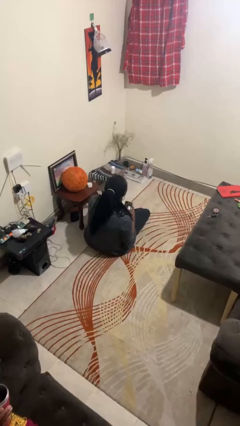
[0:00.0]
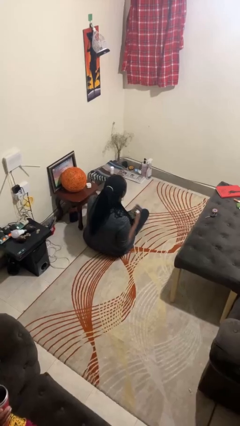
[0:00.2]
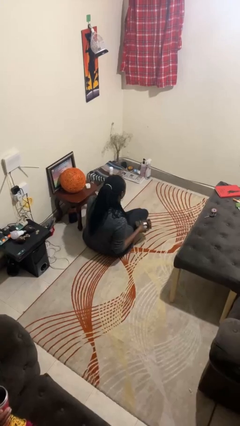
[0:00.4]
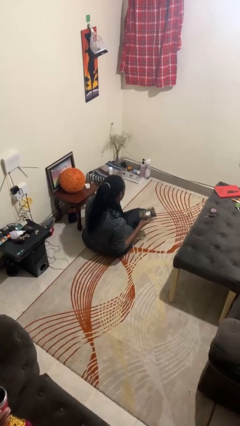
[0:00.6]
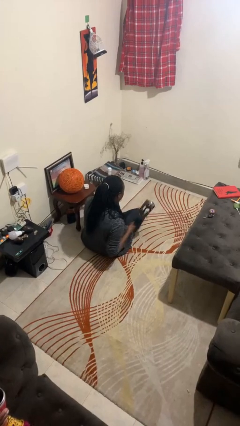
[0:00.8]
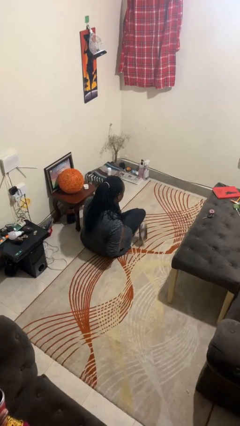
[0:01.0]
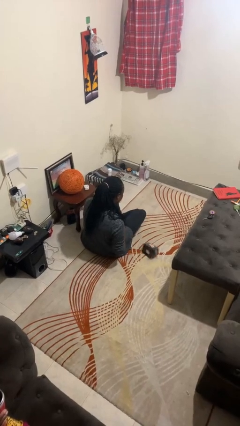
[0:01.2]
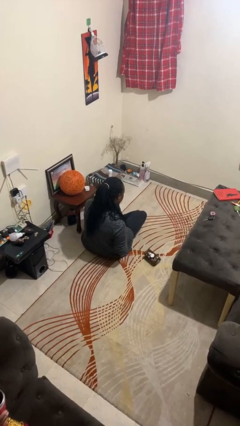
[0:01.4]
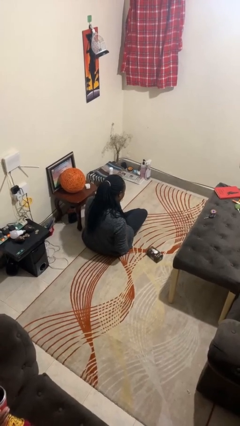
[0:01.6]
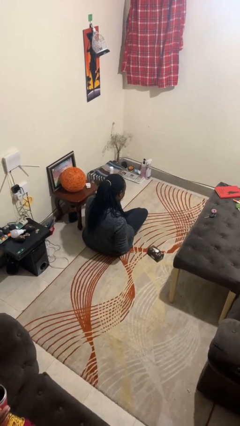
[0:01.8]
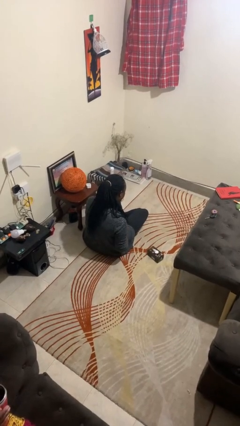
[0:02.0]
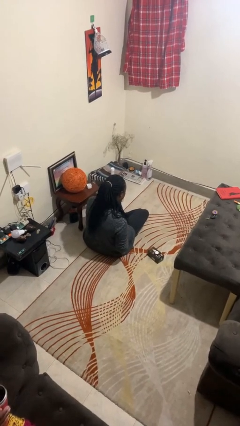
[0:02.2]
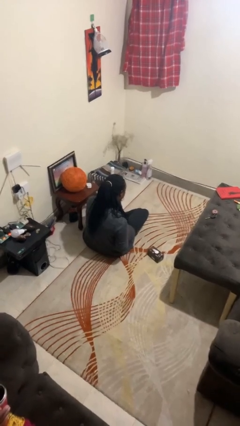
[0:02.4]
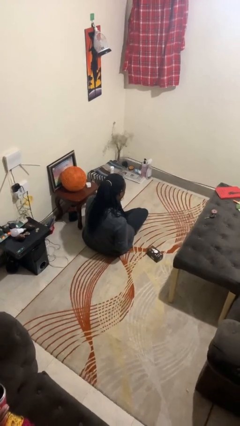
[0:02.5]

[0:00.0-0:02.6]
person throws object into air

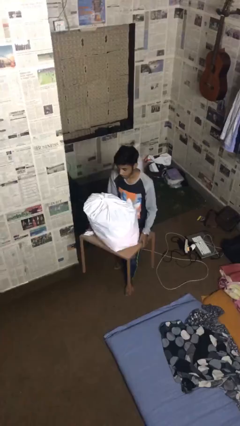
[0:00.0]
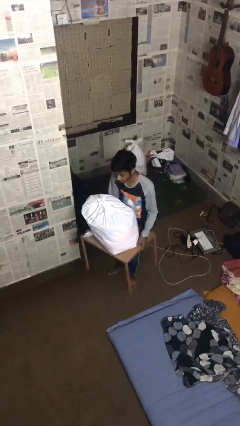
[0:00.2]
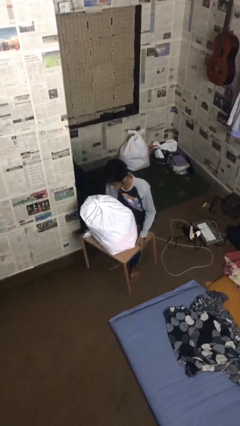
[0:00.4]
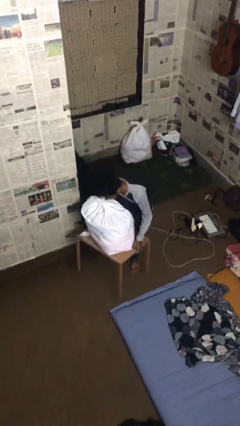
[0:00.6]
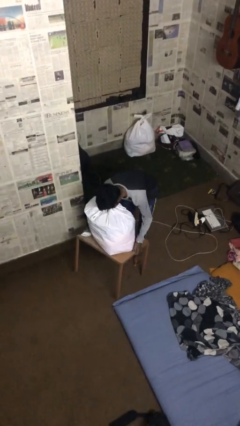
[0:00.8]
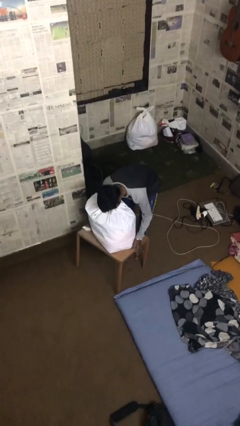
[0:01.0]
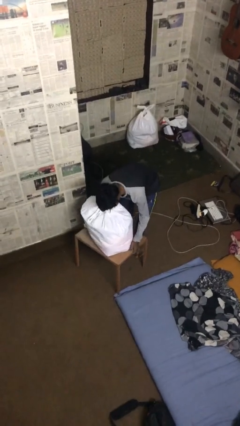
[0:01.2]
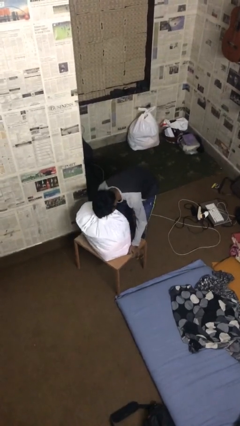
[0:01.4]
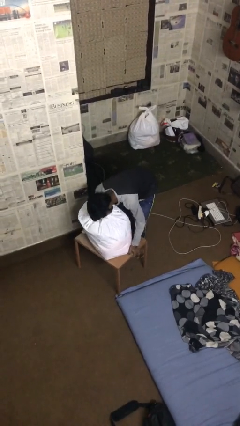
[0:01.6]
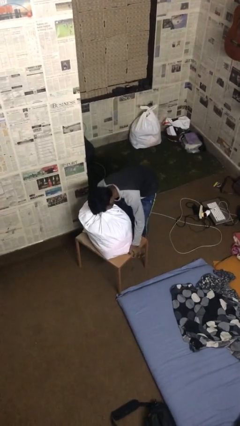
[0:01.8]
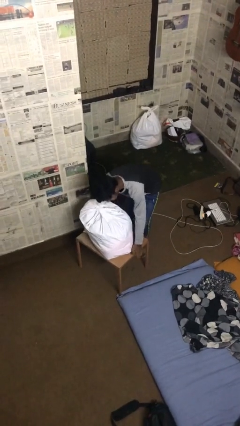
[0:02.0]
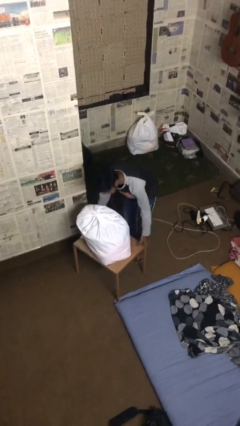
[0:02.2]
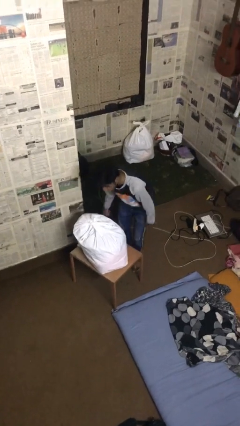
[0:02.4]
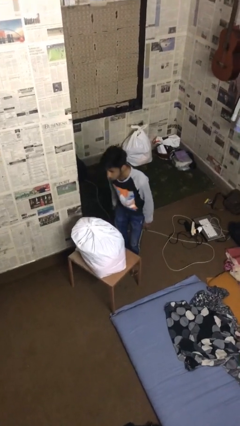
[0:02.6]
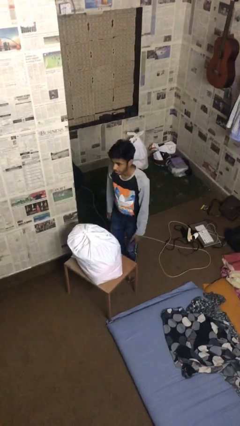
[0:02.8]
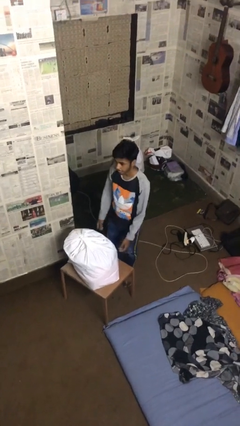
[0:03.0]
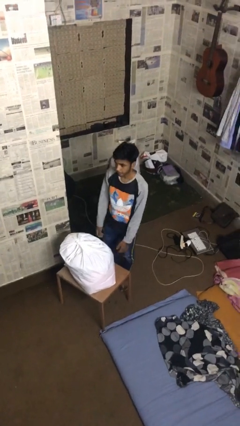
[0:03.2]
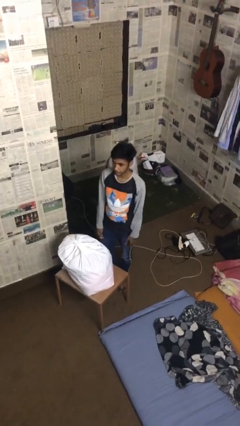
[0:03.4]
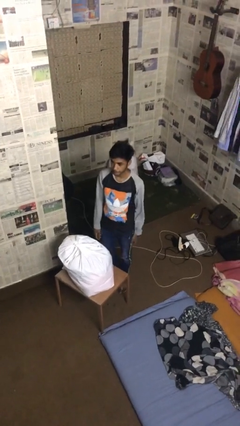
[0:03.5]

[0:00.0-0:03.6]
person puts down object on floor

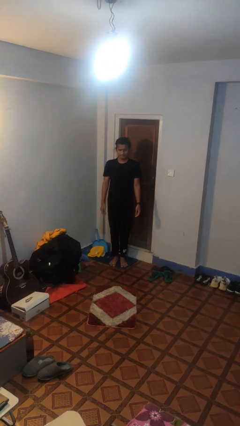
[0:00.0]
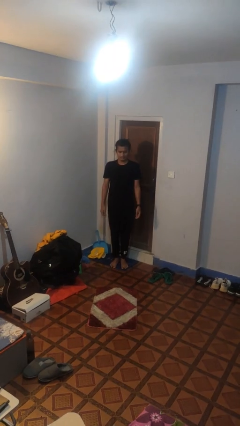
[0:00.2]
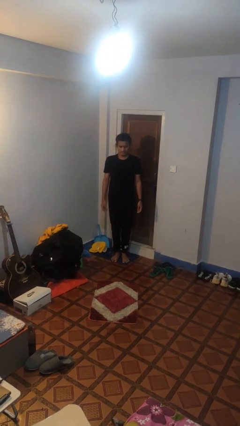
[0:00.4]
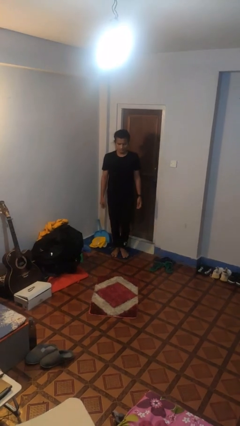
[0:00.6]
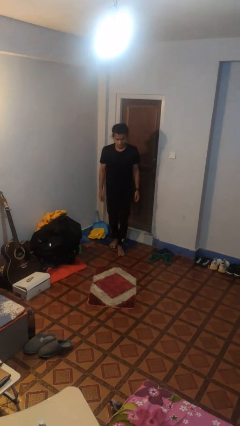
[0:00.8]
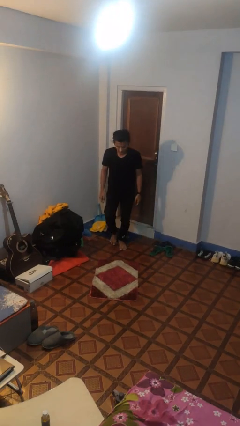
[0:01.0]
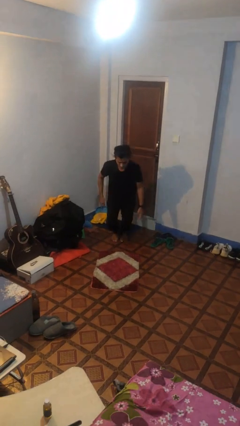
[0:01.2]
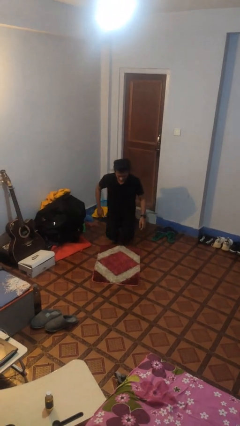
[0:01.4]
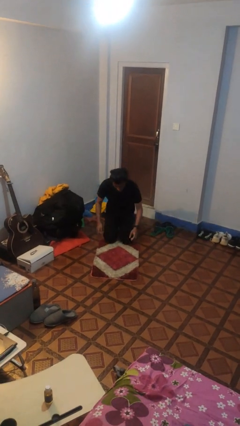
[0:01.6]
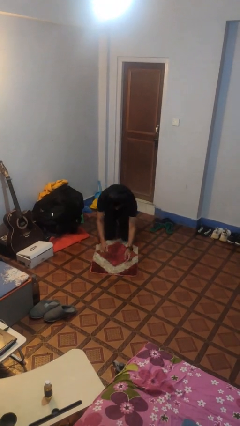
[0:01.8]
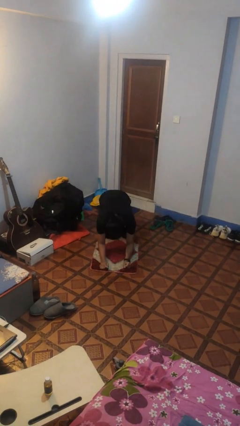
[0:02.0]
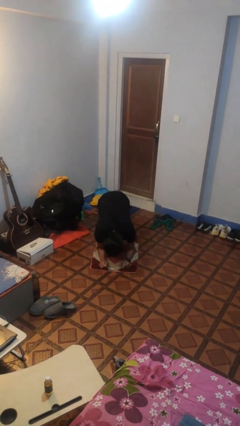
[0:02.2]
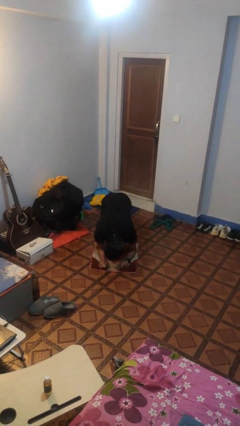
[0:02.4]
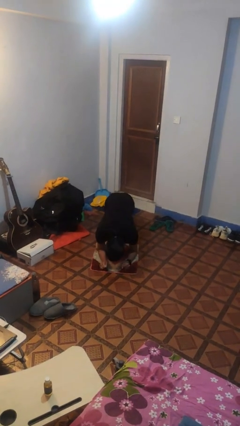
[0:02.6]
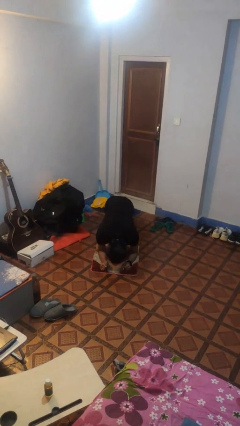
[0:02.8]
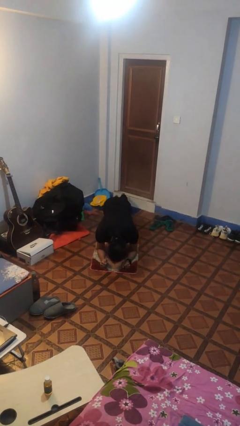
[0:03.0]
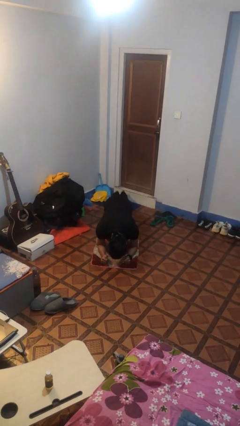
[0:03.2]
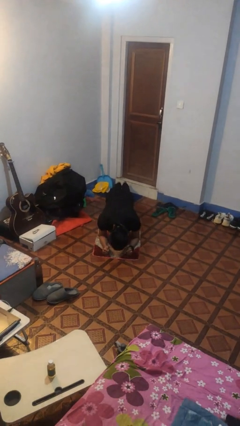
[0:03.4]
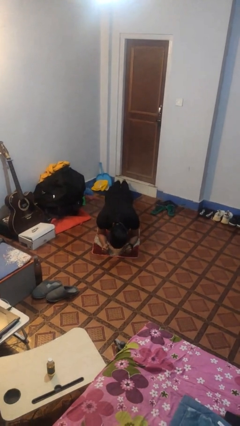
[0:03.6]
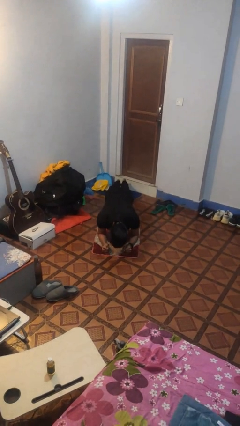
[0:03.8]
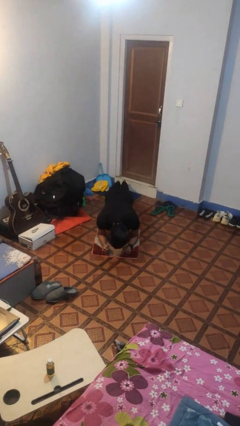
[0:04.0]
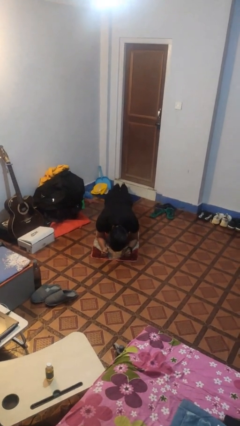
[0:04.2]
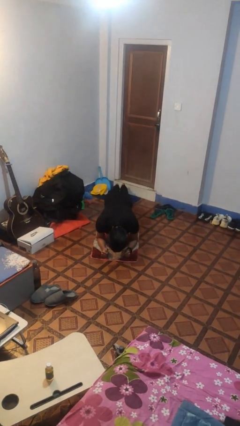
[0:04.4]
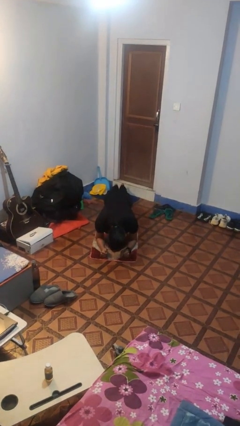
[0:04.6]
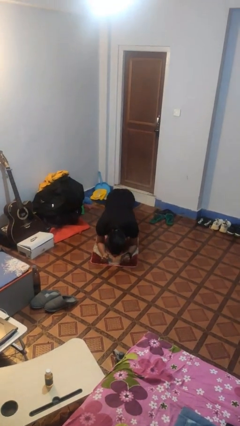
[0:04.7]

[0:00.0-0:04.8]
person exercises with plank

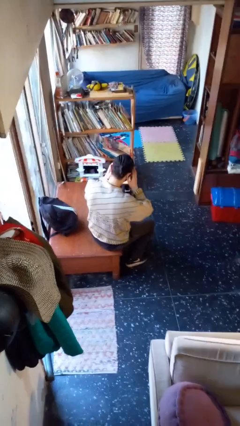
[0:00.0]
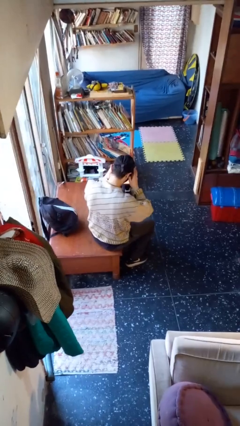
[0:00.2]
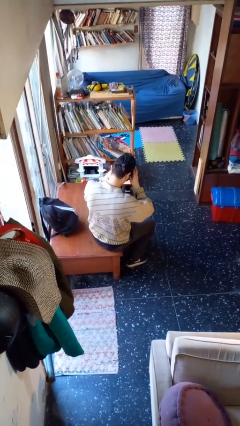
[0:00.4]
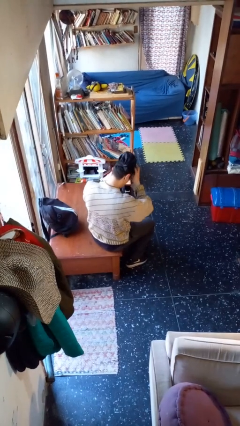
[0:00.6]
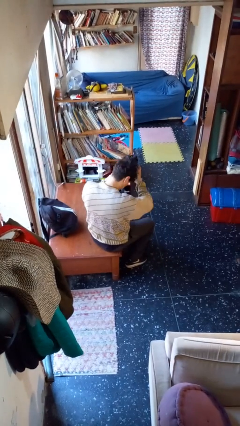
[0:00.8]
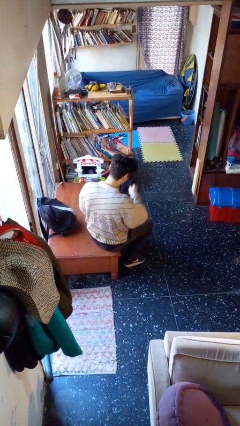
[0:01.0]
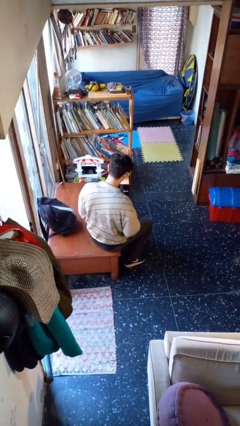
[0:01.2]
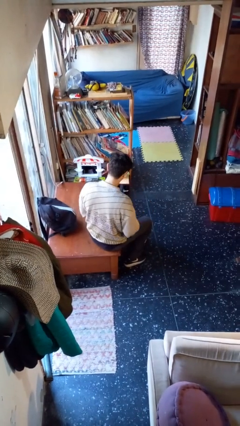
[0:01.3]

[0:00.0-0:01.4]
person takes off facemask

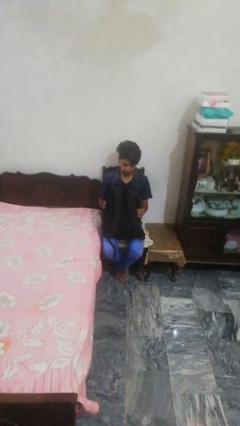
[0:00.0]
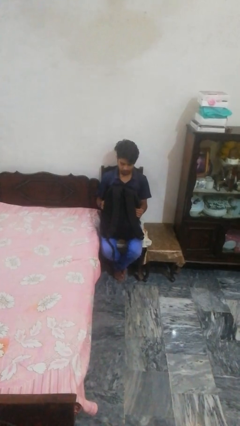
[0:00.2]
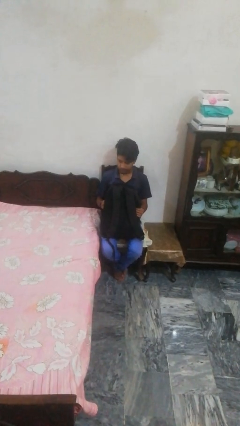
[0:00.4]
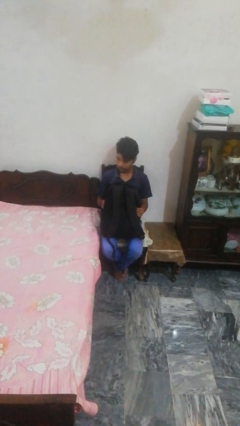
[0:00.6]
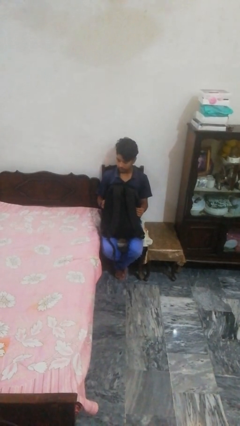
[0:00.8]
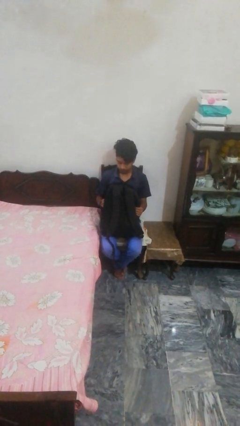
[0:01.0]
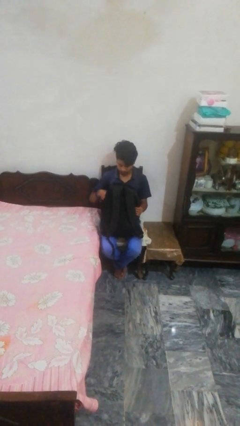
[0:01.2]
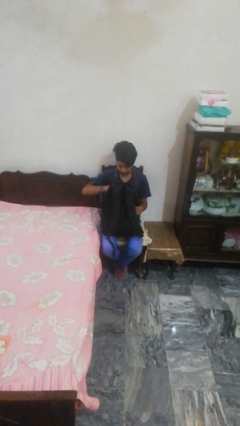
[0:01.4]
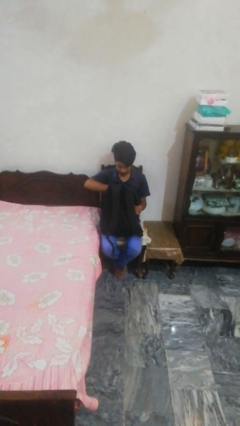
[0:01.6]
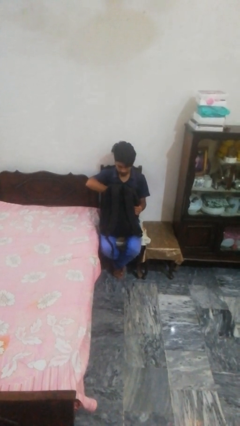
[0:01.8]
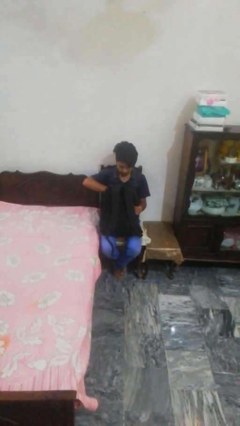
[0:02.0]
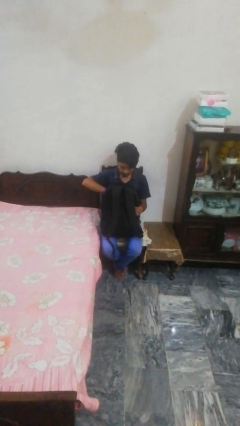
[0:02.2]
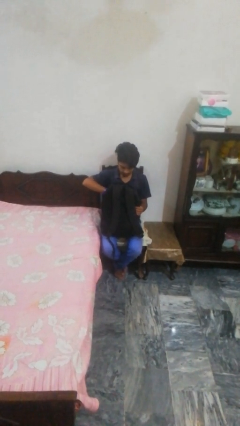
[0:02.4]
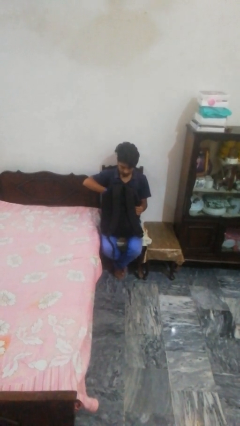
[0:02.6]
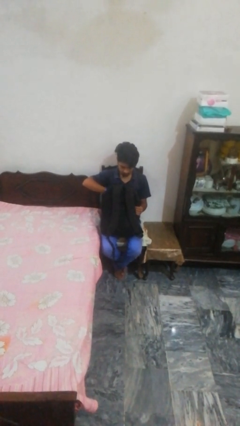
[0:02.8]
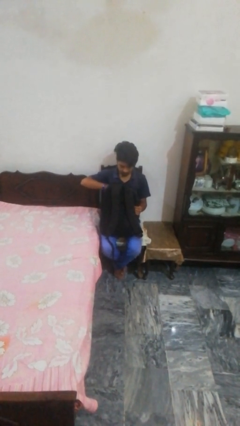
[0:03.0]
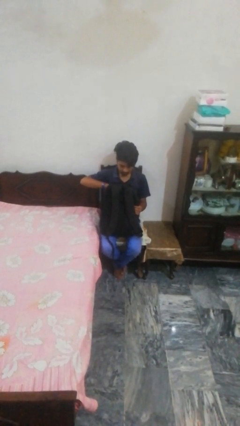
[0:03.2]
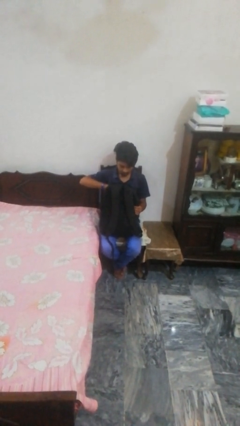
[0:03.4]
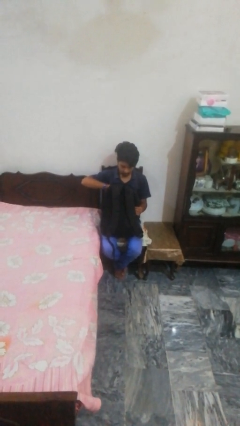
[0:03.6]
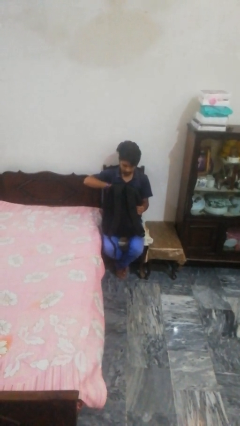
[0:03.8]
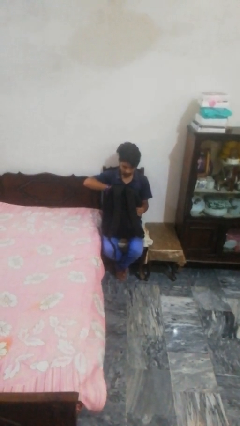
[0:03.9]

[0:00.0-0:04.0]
person searches in backpack

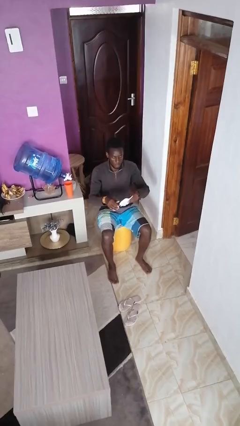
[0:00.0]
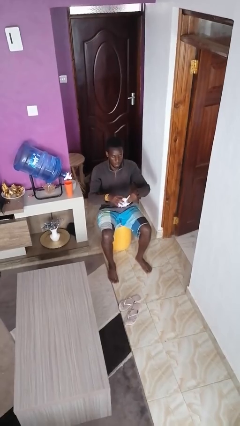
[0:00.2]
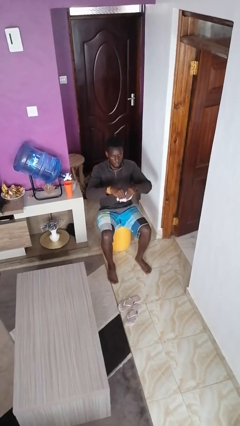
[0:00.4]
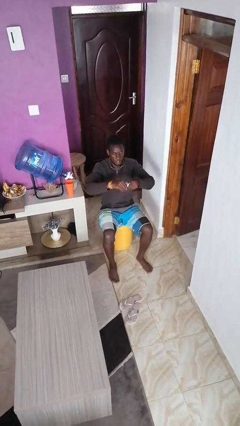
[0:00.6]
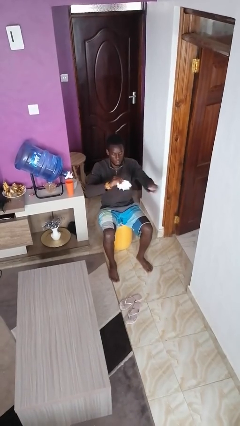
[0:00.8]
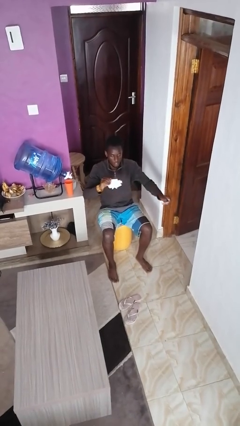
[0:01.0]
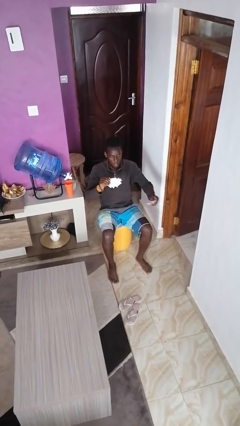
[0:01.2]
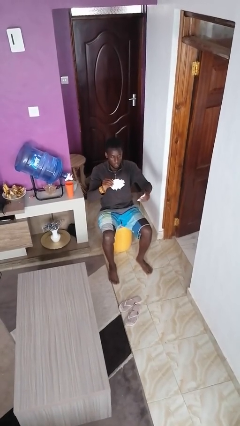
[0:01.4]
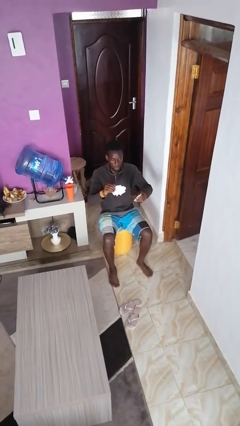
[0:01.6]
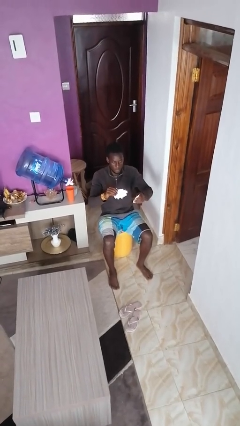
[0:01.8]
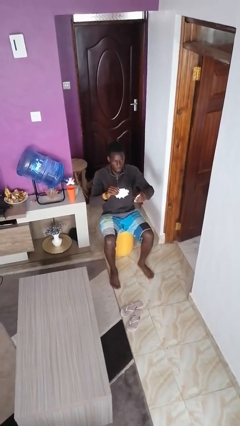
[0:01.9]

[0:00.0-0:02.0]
person tears paper
